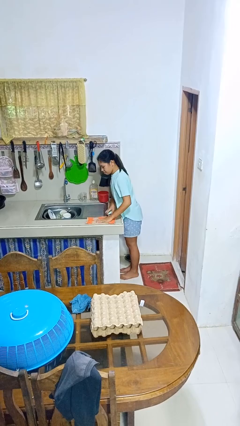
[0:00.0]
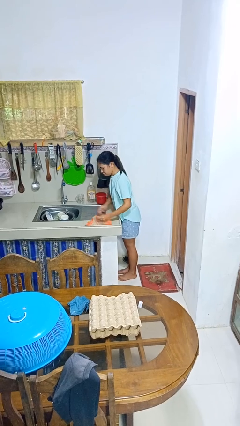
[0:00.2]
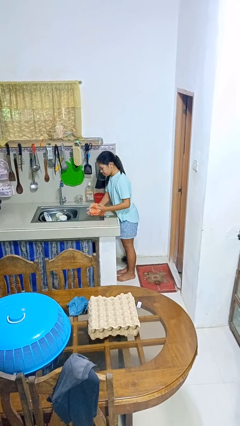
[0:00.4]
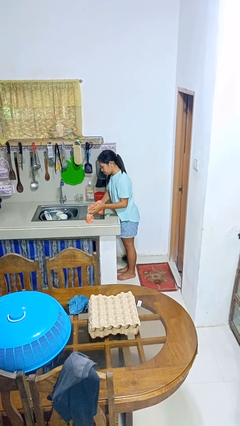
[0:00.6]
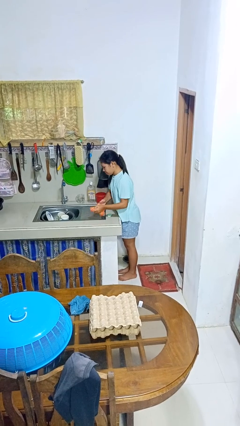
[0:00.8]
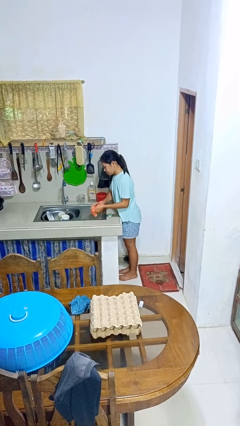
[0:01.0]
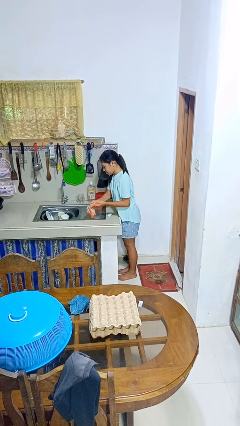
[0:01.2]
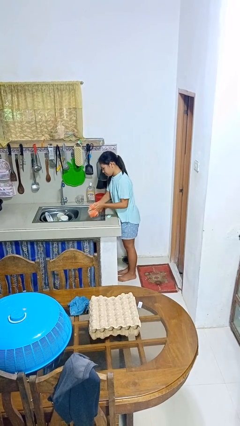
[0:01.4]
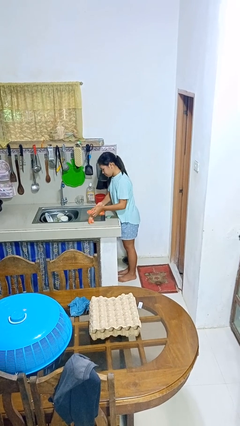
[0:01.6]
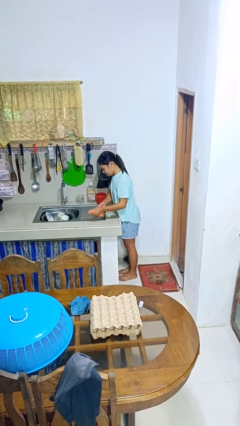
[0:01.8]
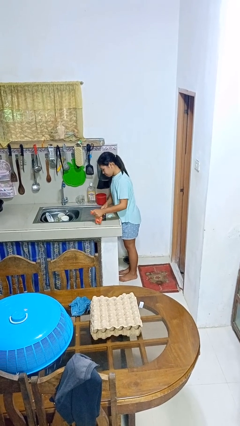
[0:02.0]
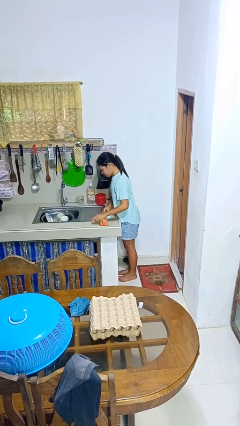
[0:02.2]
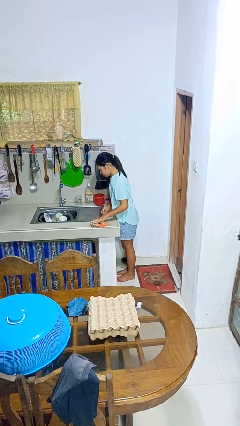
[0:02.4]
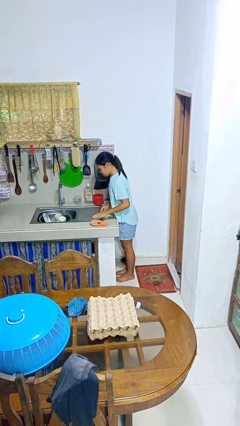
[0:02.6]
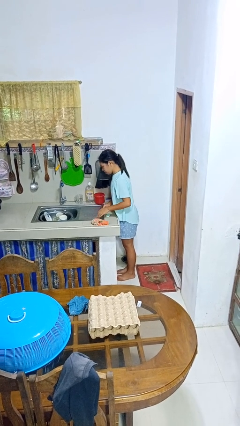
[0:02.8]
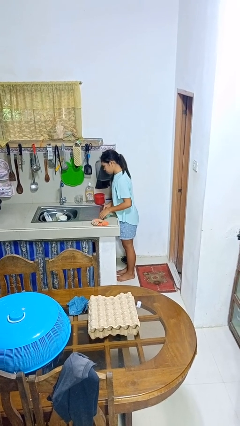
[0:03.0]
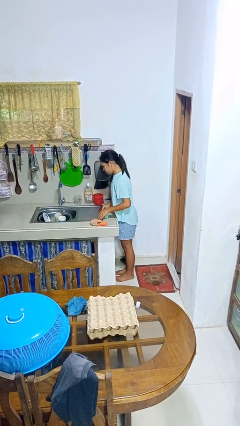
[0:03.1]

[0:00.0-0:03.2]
person dries hands with towel

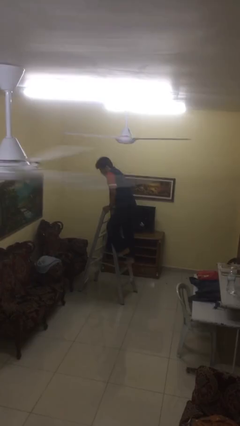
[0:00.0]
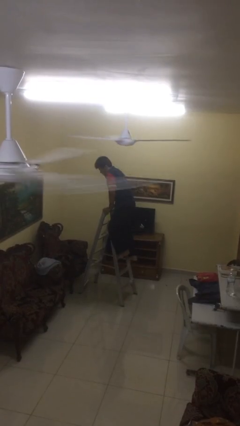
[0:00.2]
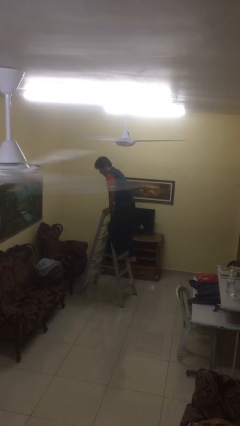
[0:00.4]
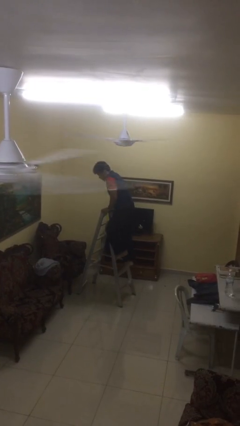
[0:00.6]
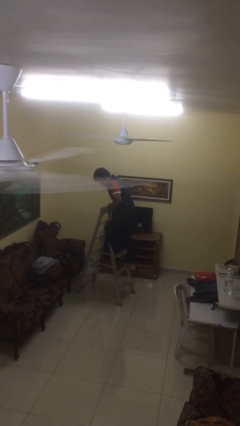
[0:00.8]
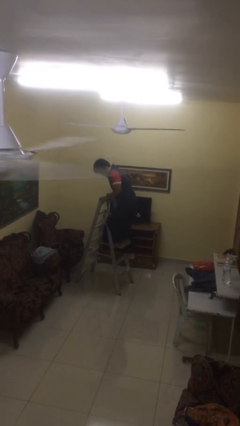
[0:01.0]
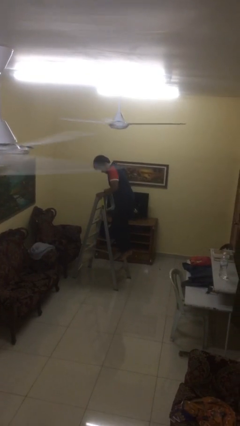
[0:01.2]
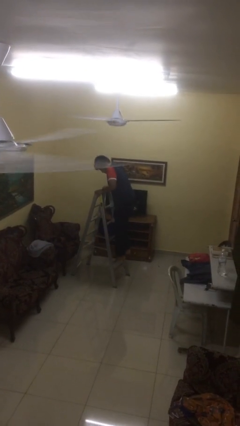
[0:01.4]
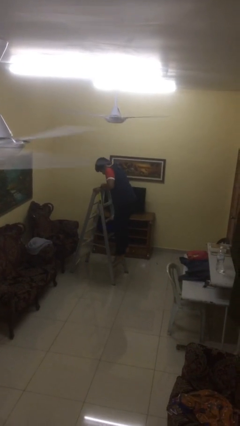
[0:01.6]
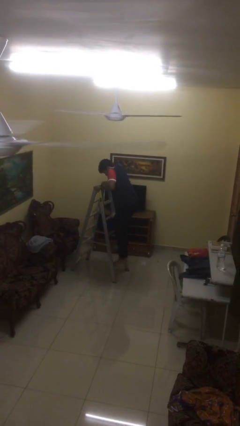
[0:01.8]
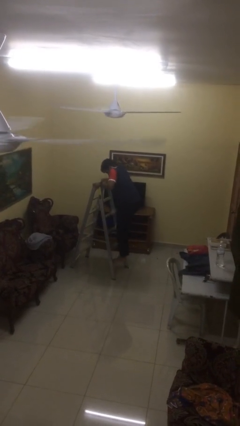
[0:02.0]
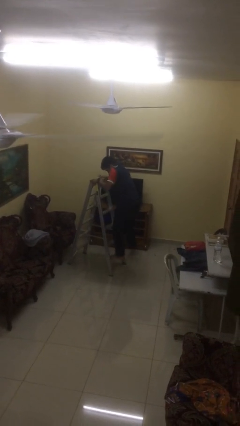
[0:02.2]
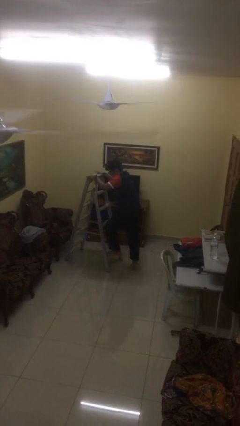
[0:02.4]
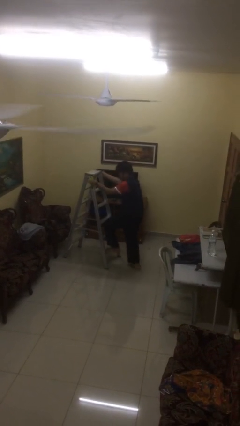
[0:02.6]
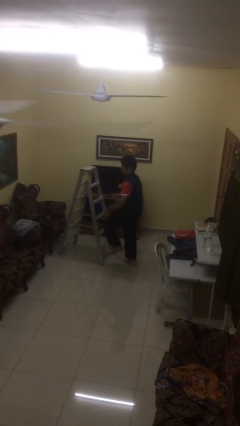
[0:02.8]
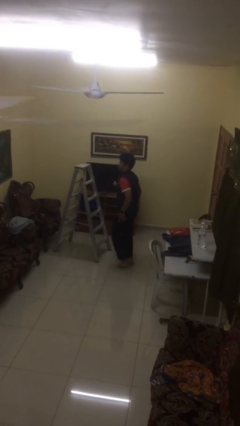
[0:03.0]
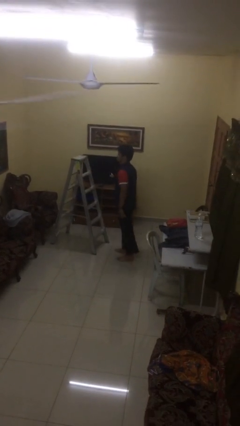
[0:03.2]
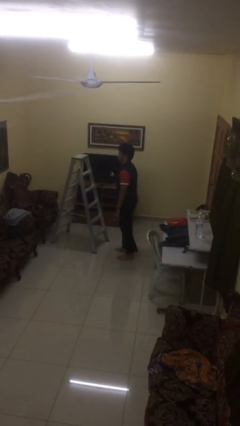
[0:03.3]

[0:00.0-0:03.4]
person climbs down ladder

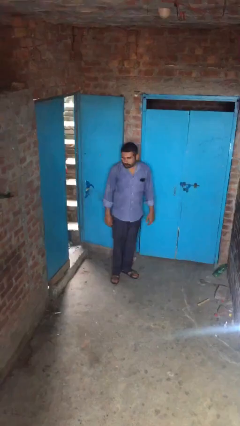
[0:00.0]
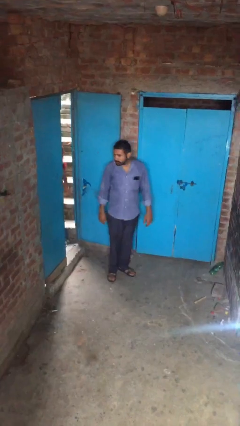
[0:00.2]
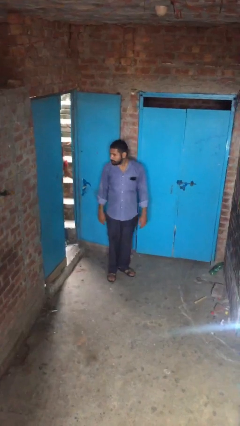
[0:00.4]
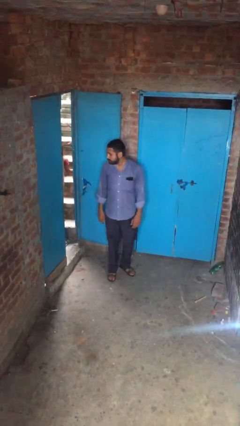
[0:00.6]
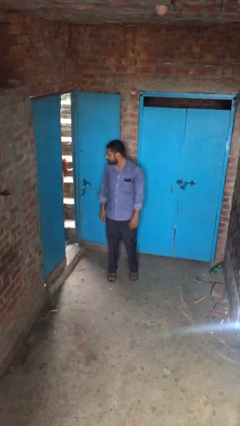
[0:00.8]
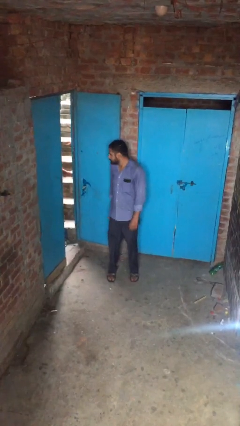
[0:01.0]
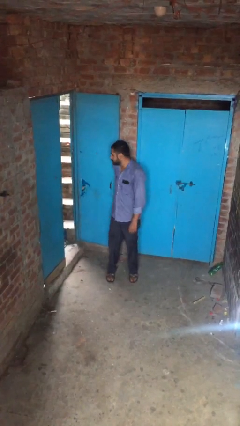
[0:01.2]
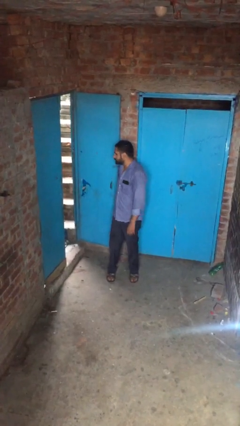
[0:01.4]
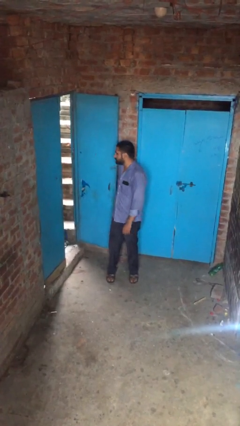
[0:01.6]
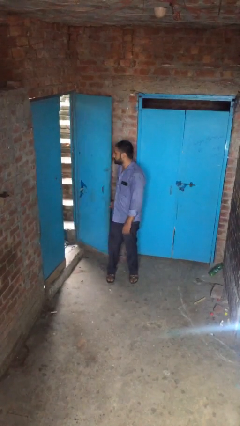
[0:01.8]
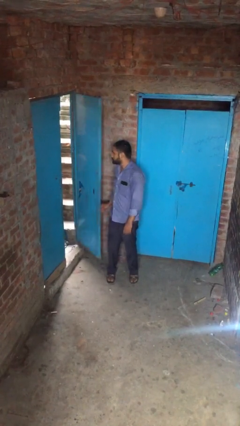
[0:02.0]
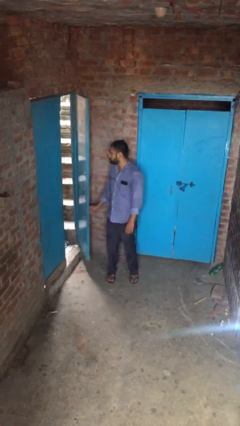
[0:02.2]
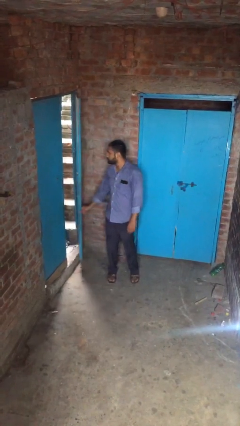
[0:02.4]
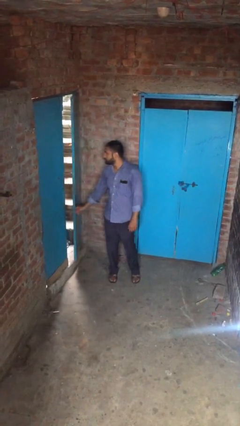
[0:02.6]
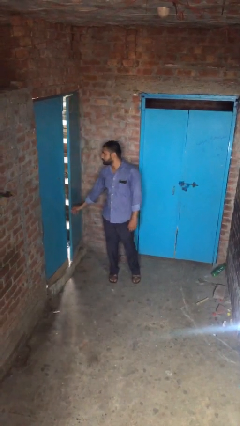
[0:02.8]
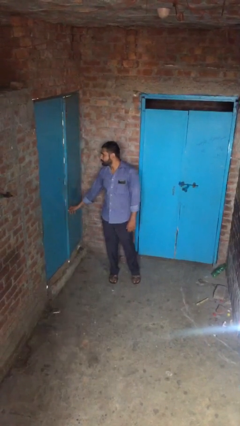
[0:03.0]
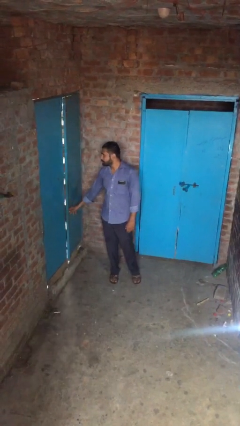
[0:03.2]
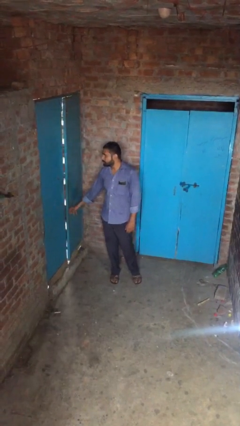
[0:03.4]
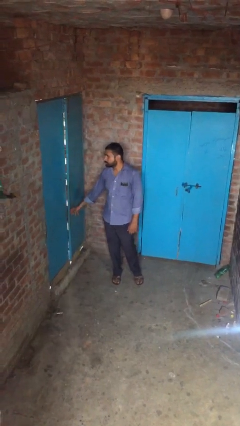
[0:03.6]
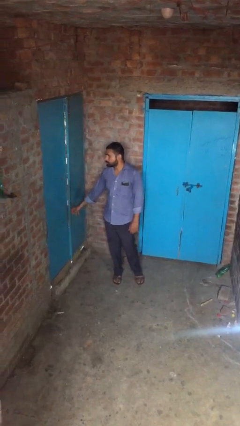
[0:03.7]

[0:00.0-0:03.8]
person closes facility door

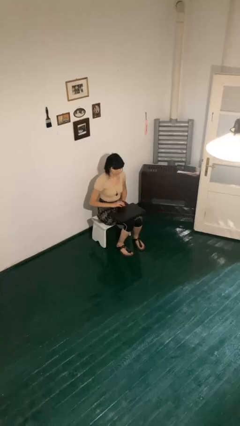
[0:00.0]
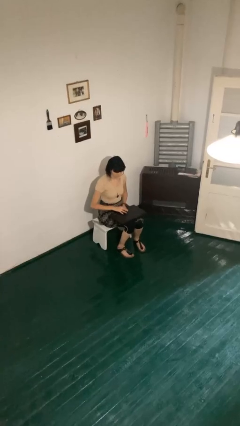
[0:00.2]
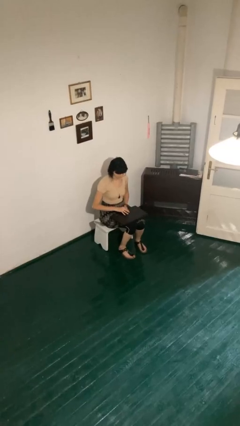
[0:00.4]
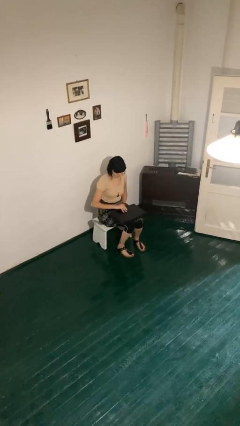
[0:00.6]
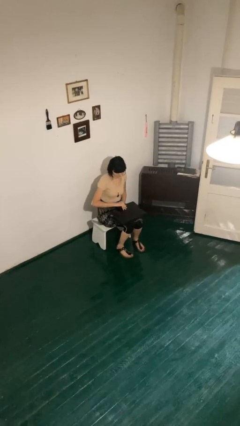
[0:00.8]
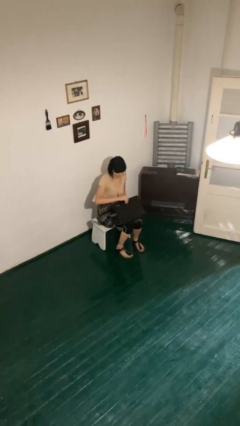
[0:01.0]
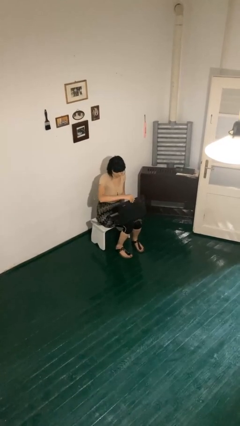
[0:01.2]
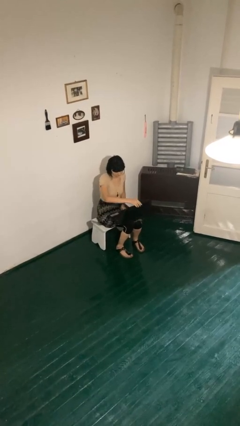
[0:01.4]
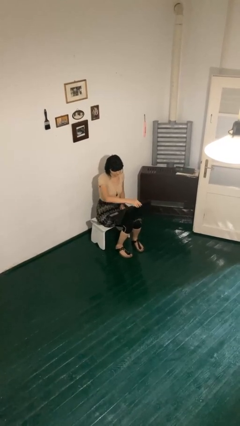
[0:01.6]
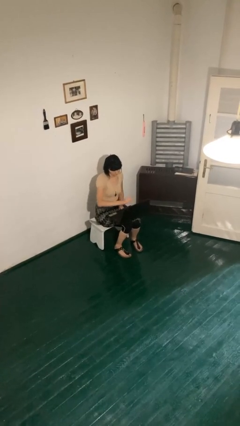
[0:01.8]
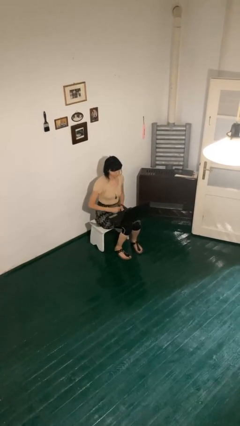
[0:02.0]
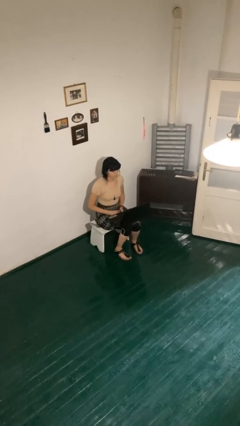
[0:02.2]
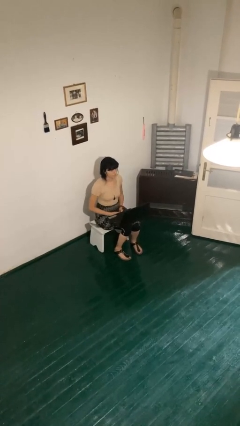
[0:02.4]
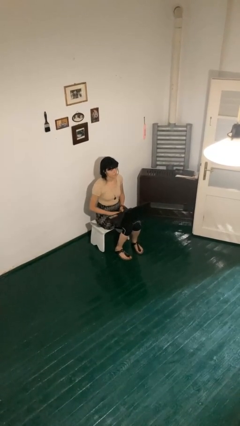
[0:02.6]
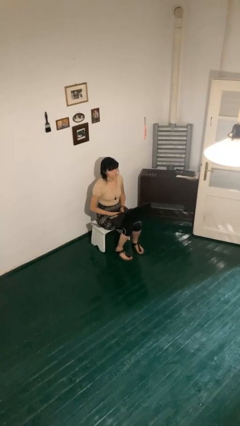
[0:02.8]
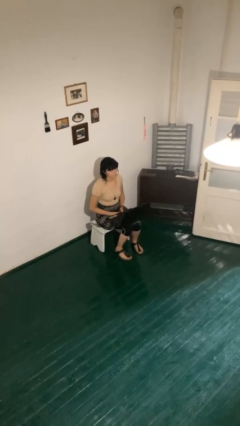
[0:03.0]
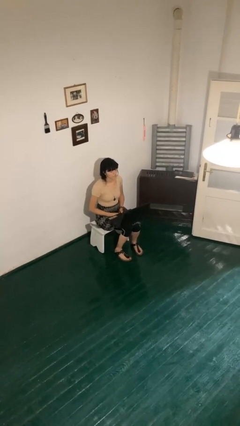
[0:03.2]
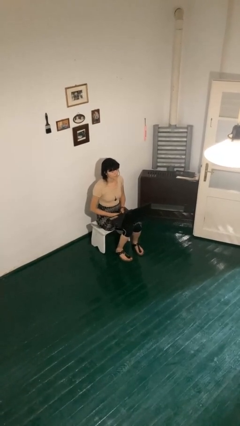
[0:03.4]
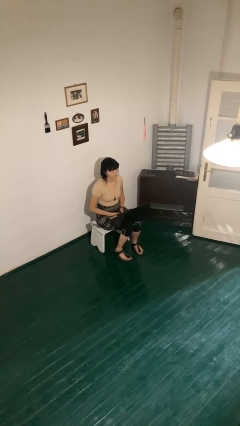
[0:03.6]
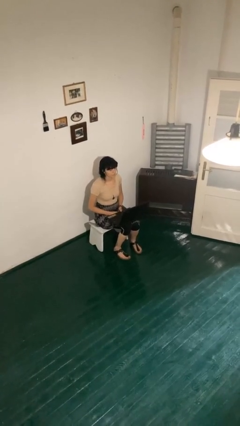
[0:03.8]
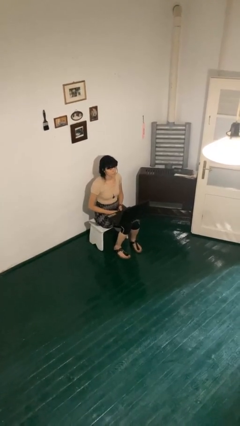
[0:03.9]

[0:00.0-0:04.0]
person opens laptop

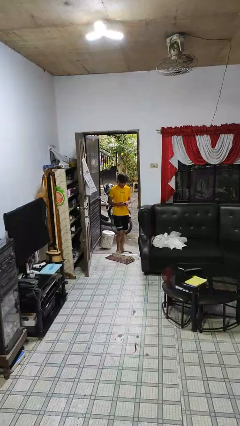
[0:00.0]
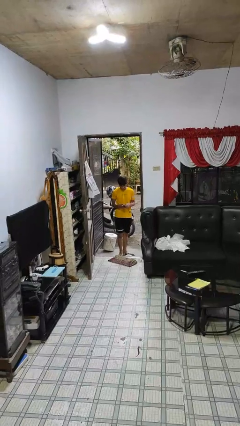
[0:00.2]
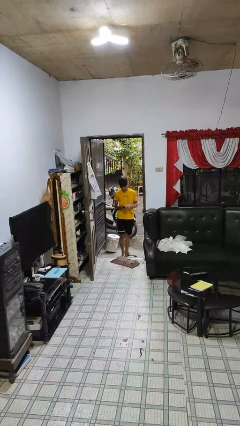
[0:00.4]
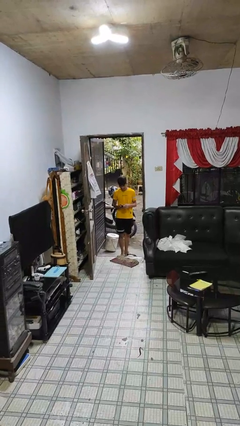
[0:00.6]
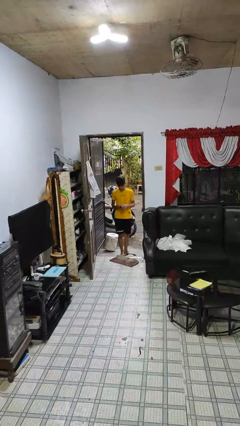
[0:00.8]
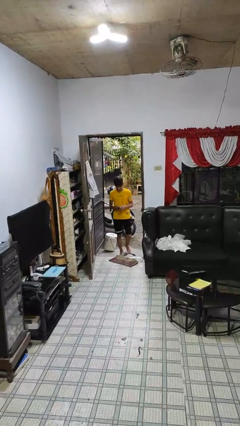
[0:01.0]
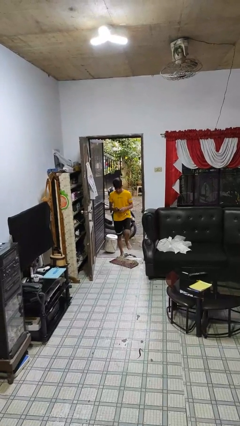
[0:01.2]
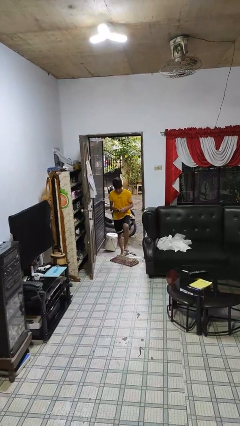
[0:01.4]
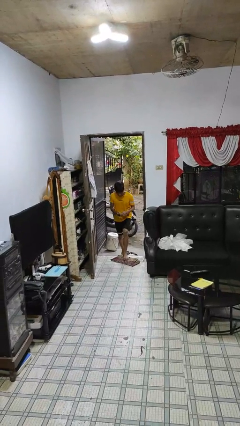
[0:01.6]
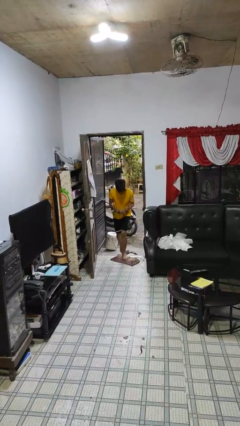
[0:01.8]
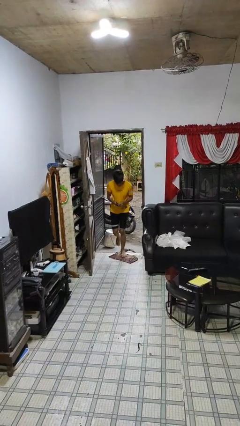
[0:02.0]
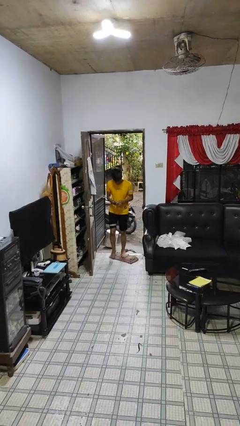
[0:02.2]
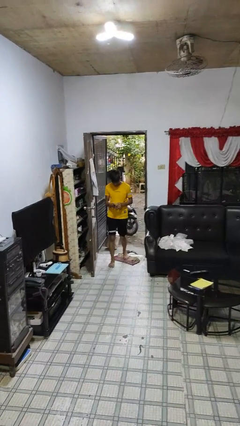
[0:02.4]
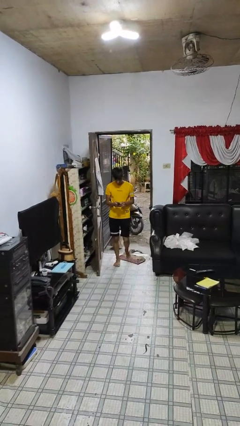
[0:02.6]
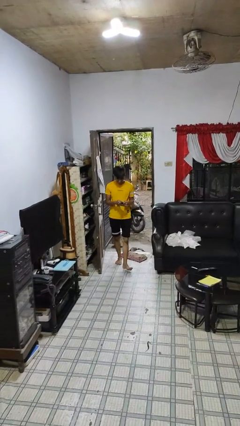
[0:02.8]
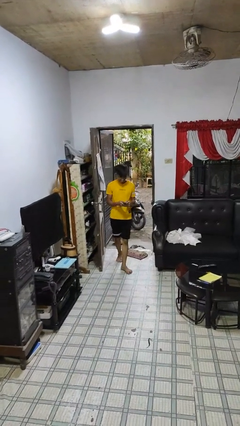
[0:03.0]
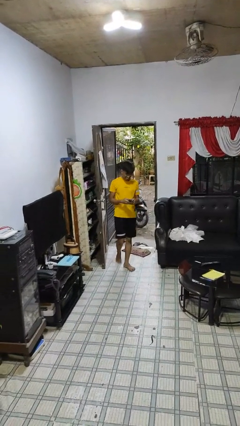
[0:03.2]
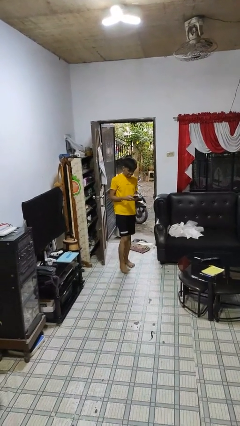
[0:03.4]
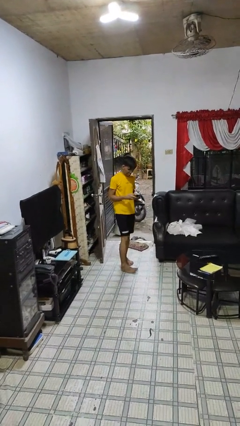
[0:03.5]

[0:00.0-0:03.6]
person enters scene through structure
